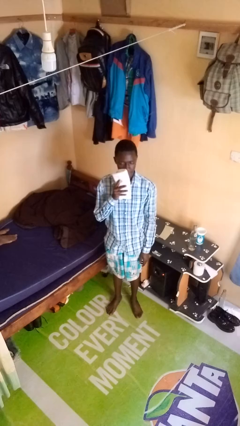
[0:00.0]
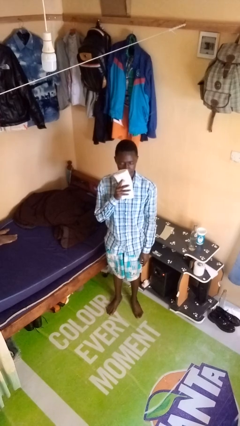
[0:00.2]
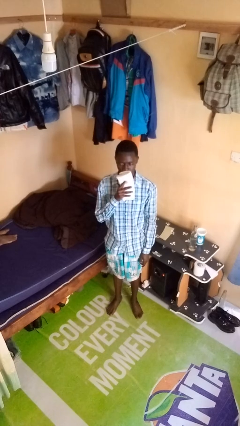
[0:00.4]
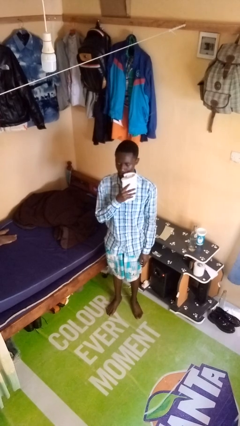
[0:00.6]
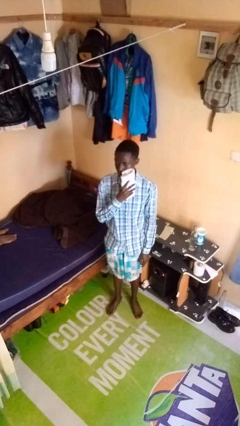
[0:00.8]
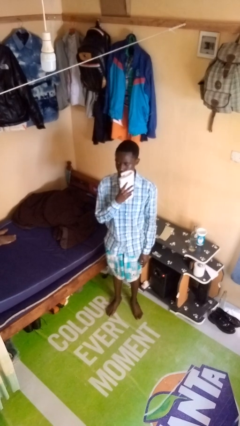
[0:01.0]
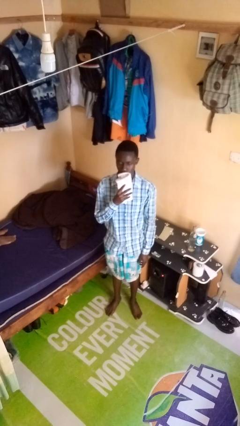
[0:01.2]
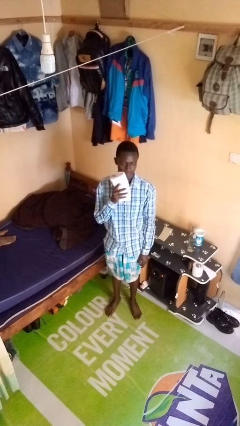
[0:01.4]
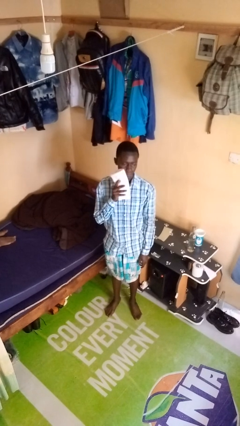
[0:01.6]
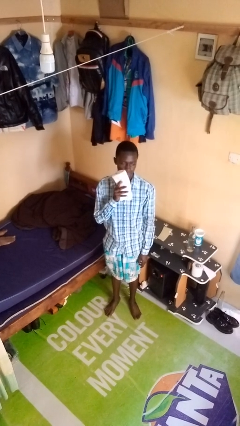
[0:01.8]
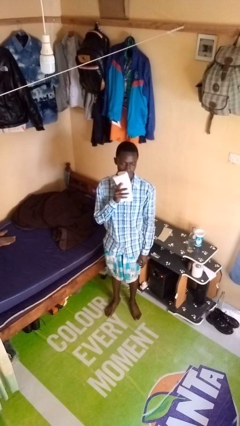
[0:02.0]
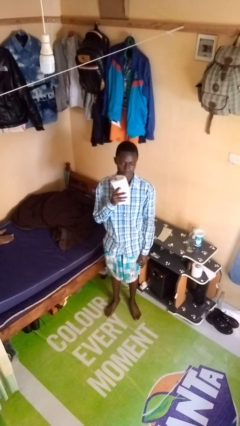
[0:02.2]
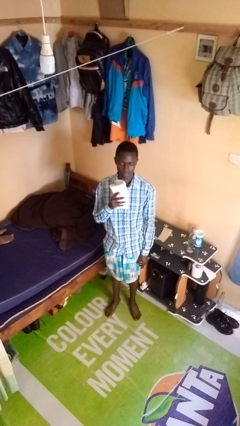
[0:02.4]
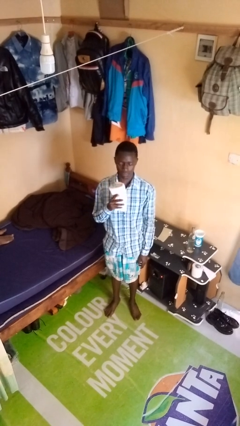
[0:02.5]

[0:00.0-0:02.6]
person wipes mouth with napkin

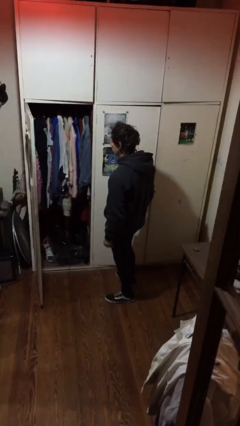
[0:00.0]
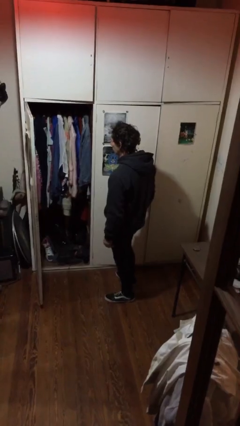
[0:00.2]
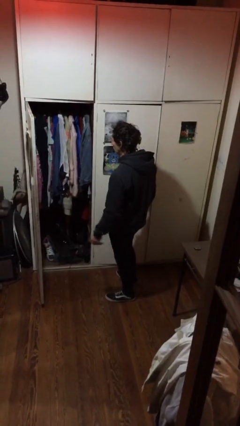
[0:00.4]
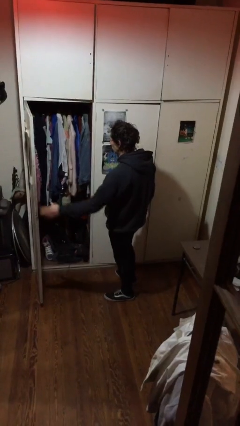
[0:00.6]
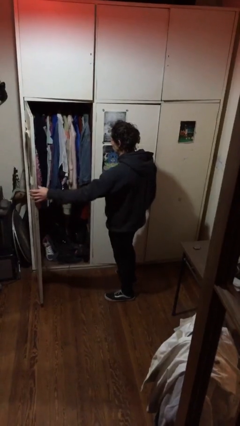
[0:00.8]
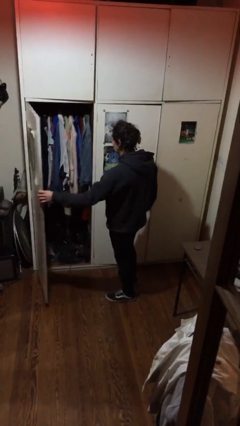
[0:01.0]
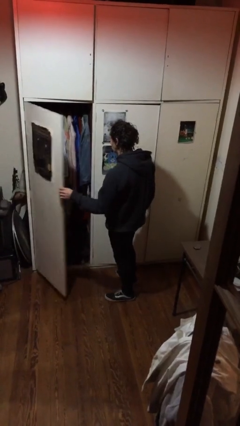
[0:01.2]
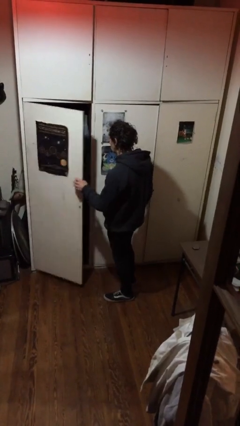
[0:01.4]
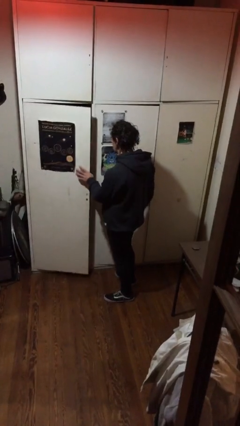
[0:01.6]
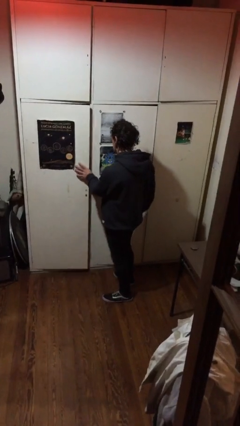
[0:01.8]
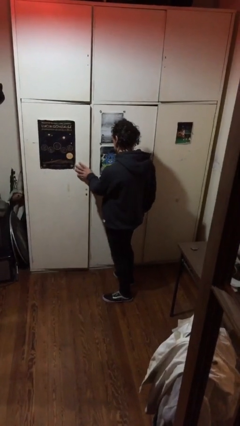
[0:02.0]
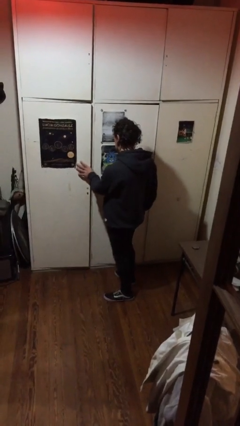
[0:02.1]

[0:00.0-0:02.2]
person closes closet door

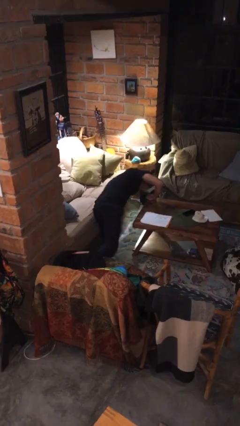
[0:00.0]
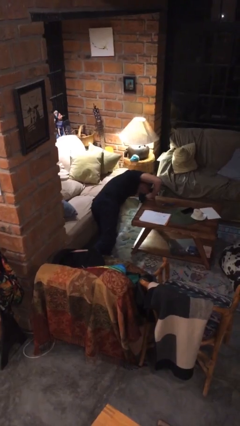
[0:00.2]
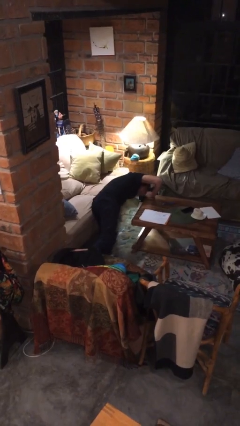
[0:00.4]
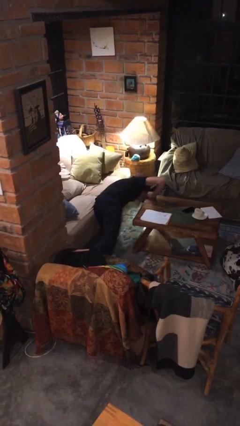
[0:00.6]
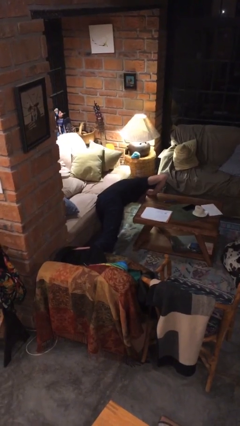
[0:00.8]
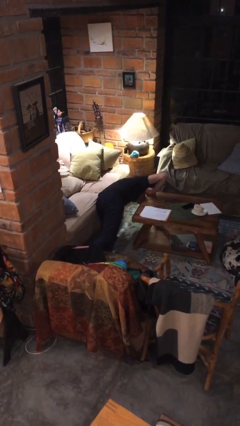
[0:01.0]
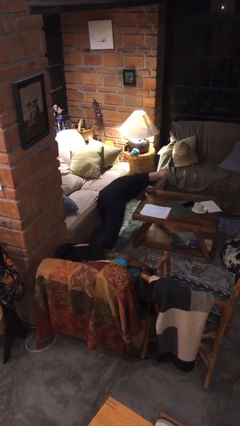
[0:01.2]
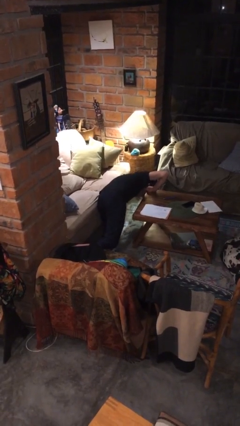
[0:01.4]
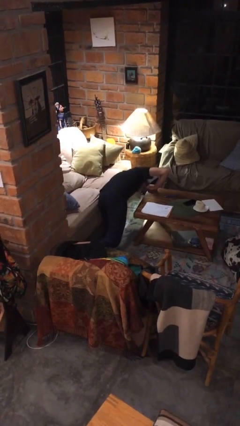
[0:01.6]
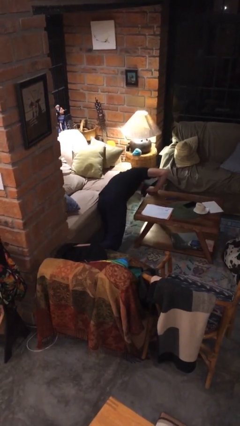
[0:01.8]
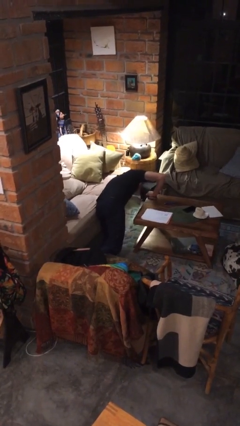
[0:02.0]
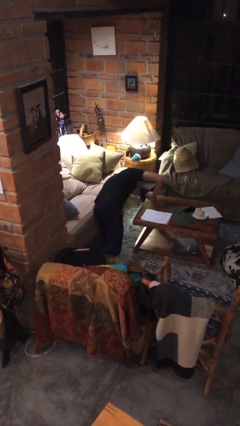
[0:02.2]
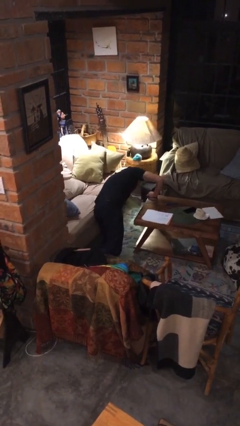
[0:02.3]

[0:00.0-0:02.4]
person searches under couch

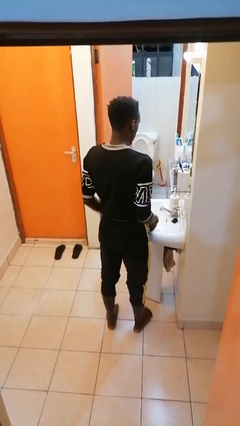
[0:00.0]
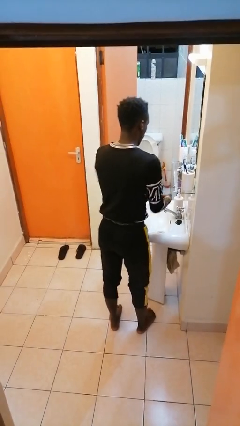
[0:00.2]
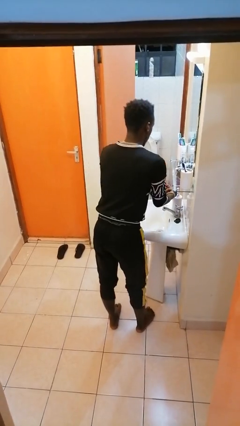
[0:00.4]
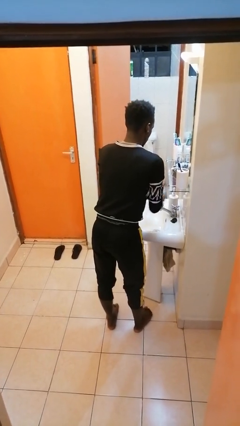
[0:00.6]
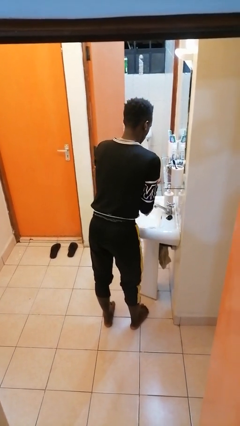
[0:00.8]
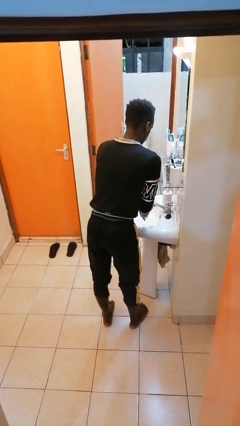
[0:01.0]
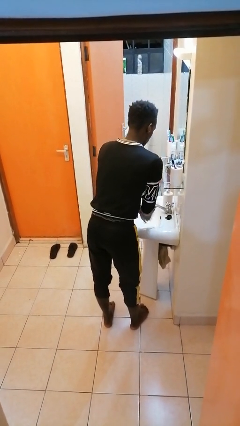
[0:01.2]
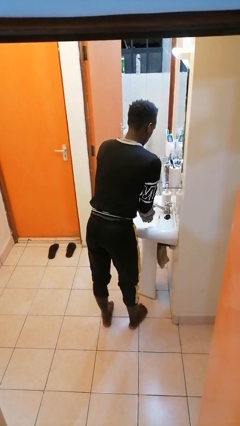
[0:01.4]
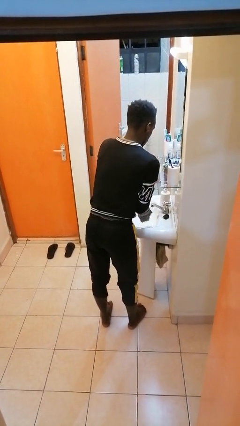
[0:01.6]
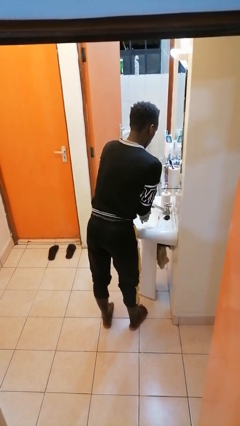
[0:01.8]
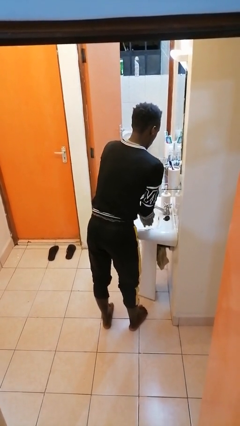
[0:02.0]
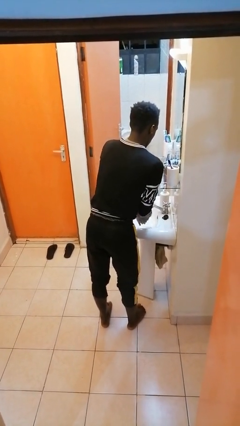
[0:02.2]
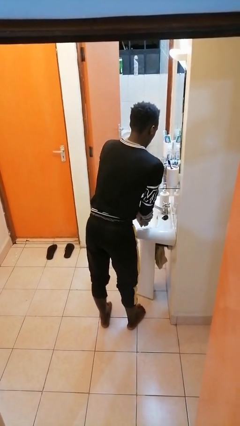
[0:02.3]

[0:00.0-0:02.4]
person washes hands

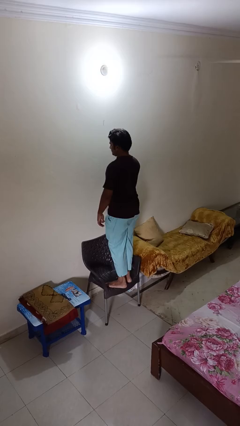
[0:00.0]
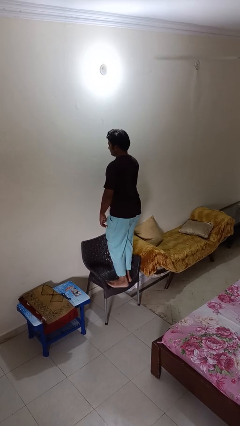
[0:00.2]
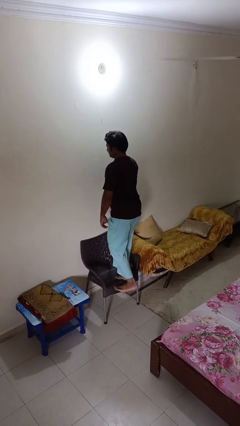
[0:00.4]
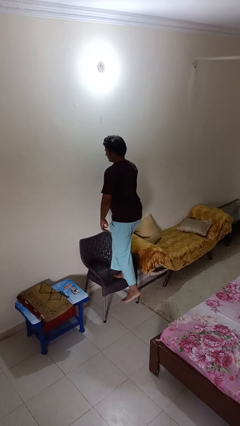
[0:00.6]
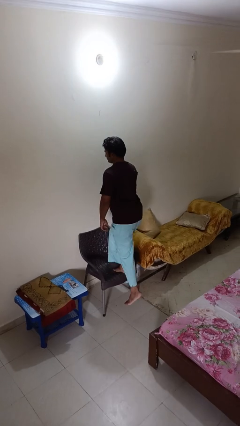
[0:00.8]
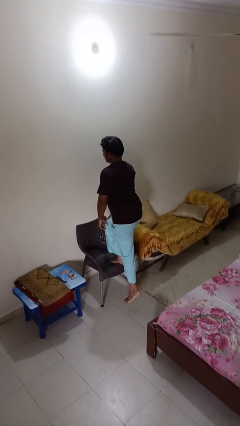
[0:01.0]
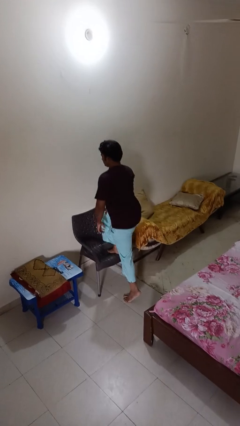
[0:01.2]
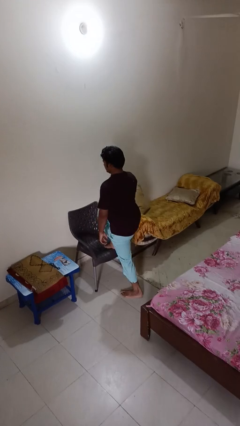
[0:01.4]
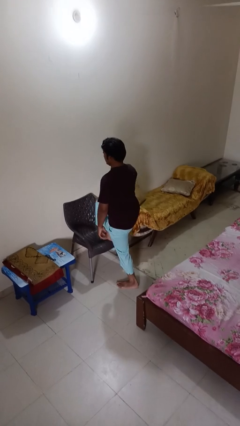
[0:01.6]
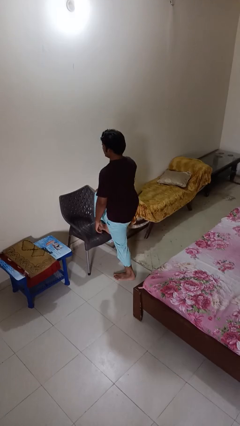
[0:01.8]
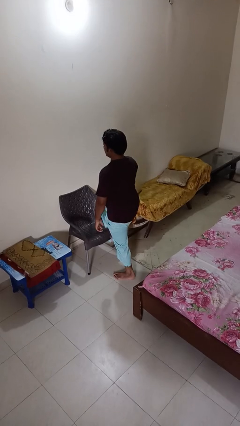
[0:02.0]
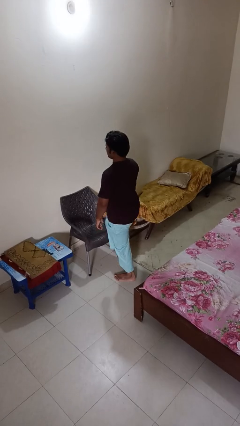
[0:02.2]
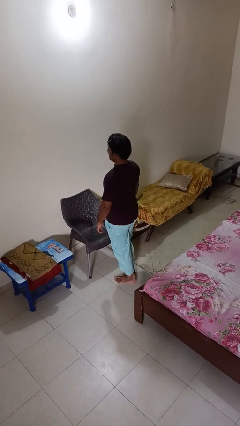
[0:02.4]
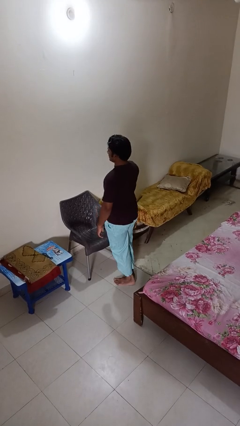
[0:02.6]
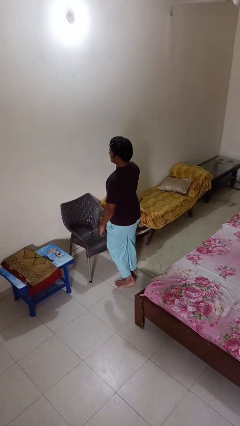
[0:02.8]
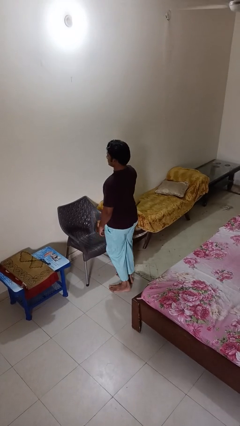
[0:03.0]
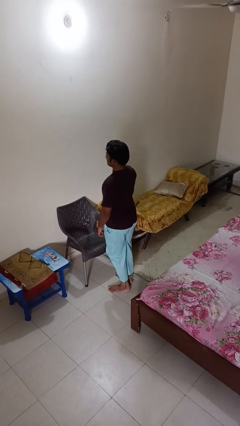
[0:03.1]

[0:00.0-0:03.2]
person climbs off chair

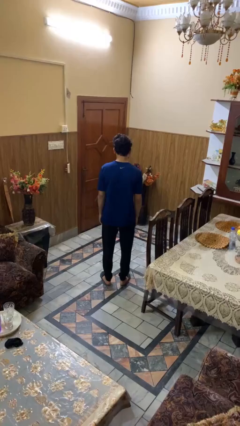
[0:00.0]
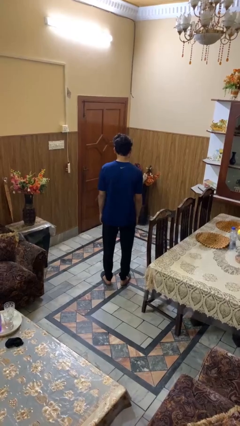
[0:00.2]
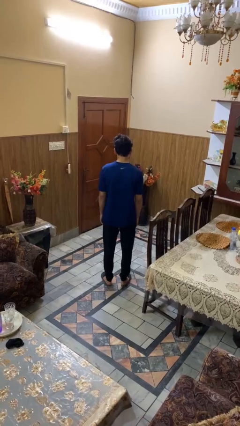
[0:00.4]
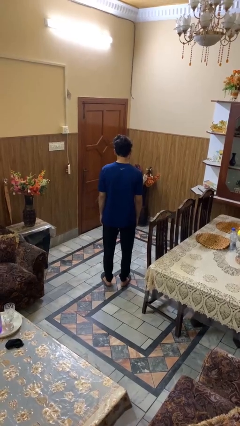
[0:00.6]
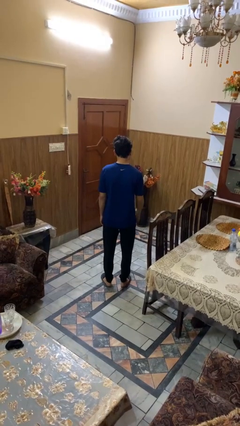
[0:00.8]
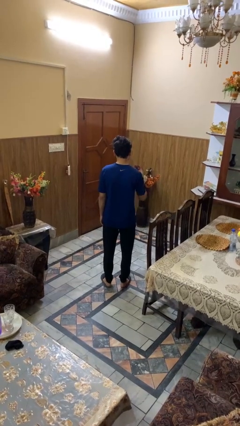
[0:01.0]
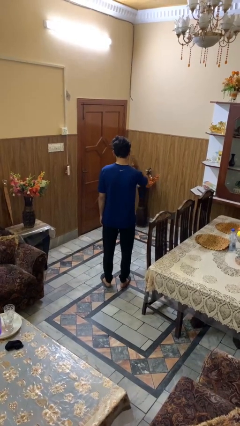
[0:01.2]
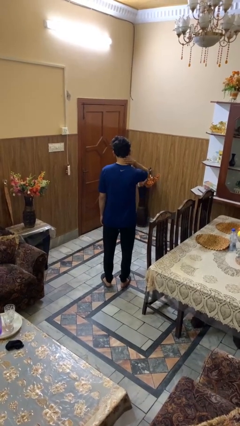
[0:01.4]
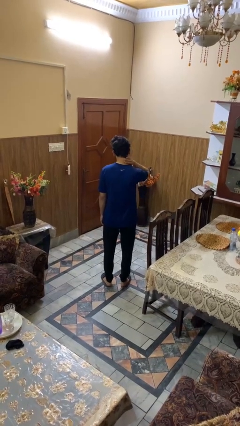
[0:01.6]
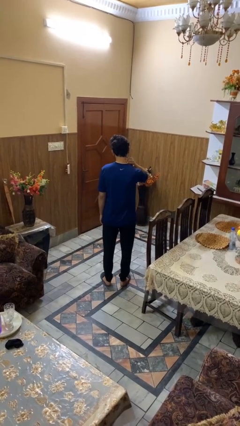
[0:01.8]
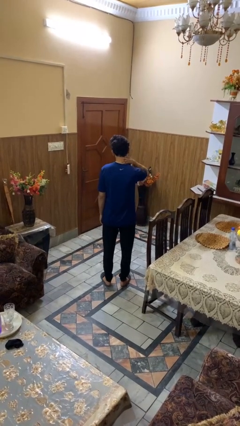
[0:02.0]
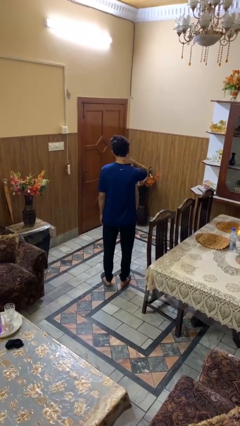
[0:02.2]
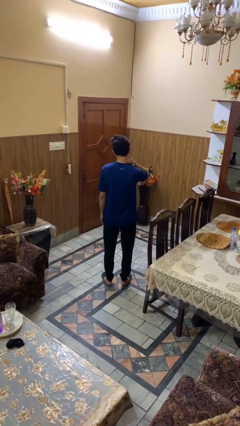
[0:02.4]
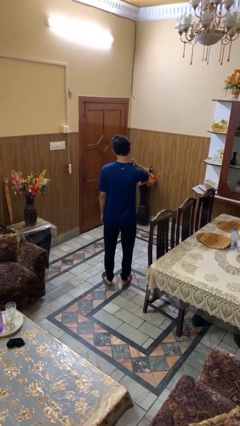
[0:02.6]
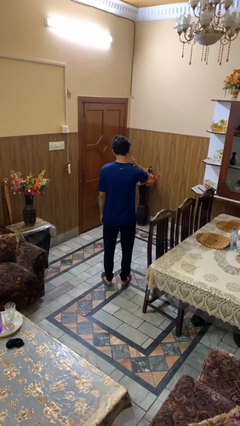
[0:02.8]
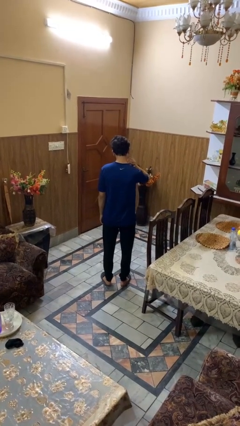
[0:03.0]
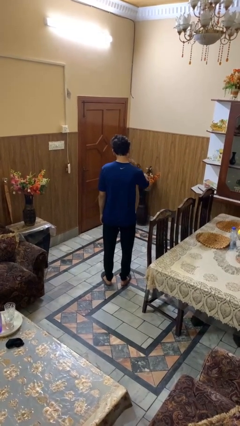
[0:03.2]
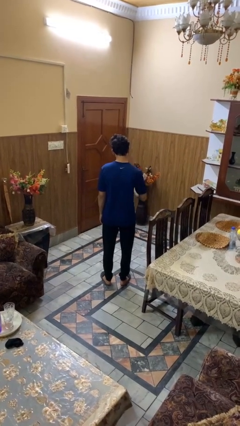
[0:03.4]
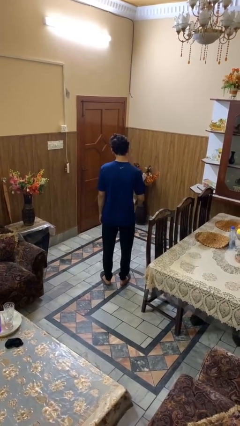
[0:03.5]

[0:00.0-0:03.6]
person rubs neck

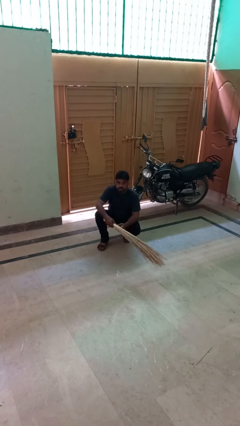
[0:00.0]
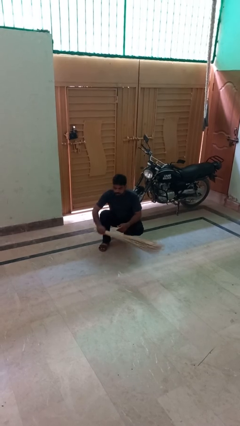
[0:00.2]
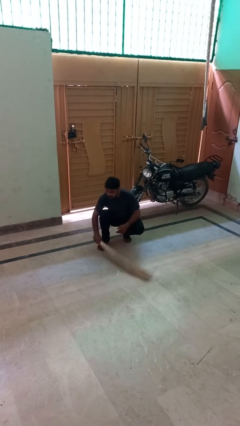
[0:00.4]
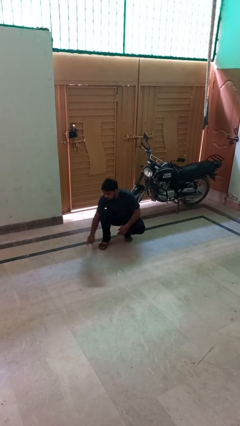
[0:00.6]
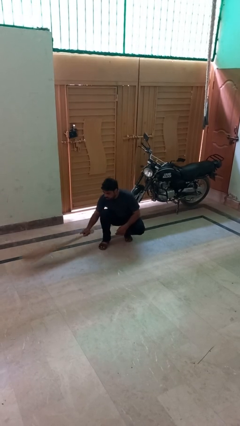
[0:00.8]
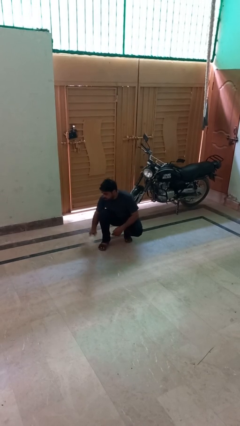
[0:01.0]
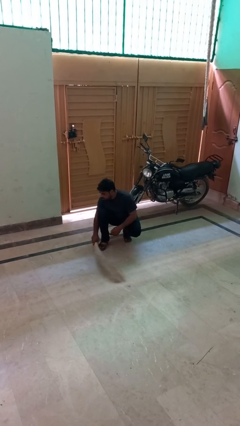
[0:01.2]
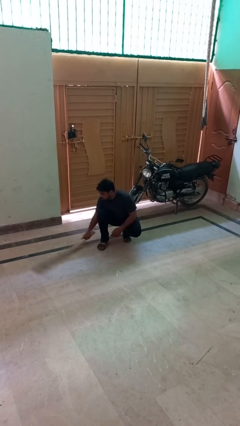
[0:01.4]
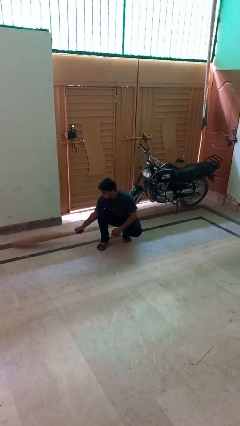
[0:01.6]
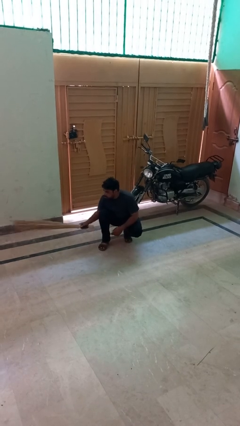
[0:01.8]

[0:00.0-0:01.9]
person sweeps floor
